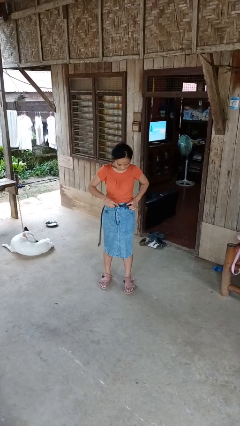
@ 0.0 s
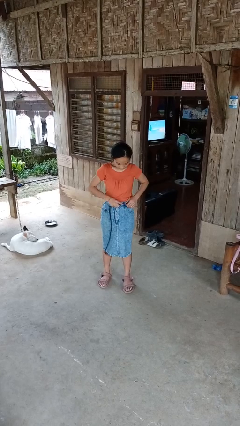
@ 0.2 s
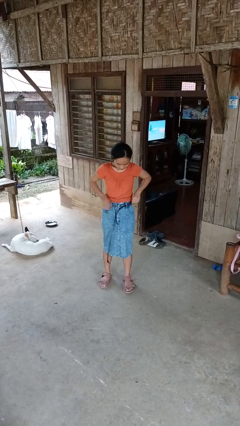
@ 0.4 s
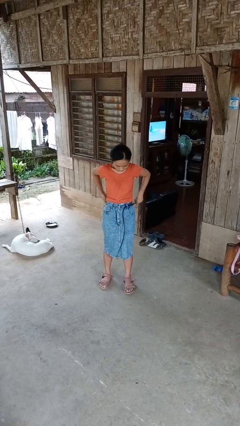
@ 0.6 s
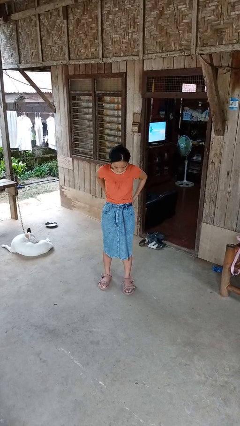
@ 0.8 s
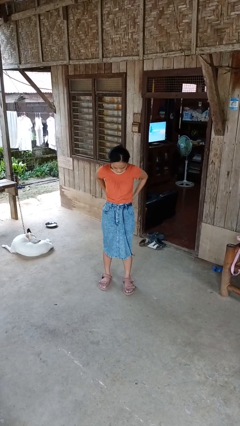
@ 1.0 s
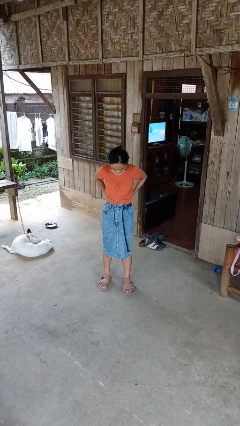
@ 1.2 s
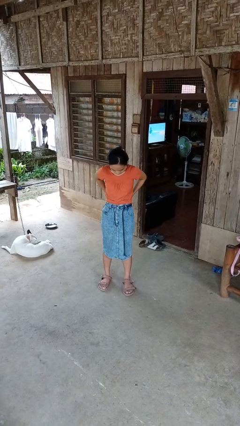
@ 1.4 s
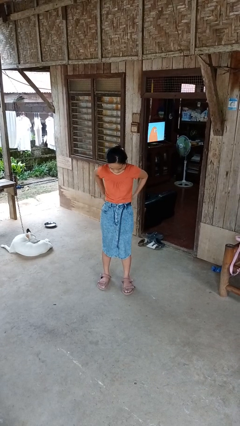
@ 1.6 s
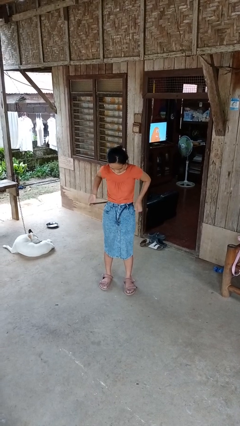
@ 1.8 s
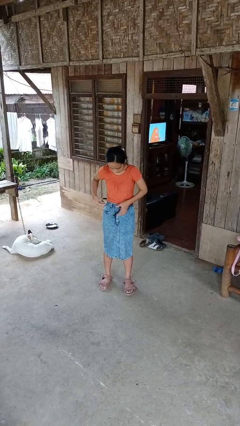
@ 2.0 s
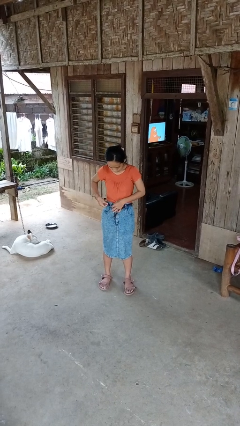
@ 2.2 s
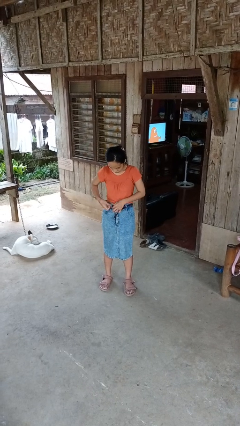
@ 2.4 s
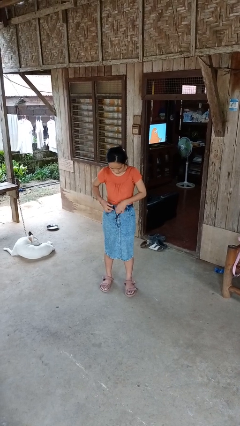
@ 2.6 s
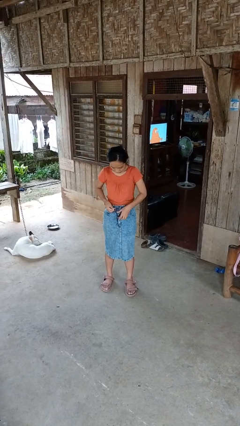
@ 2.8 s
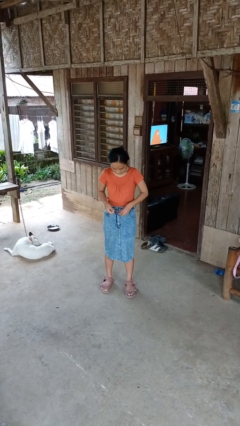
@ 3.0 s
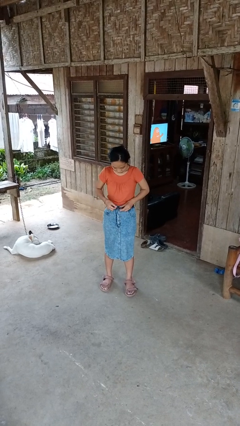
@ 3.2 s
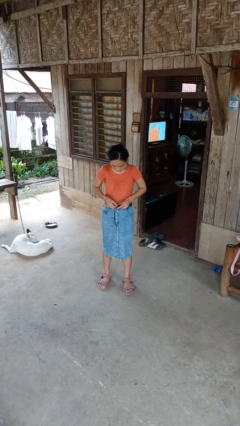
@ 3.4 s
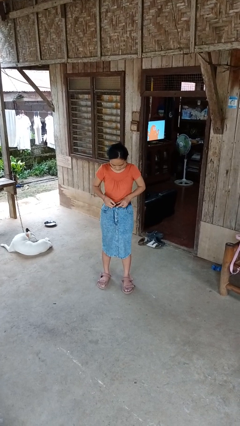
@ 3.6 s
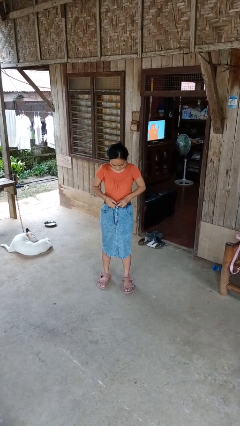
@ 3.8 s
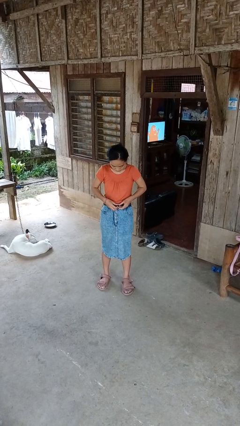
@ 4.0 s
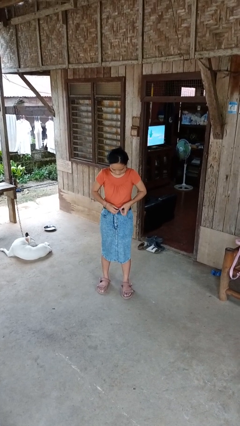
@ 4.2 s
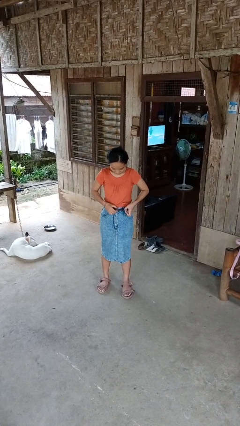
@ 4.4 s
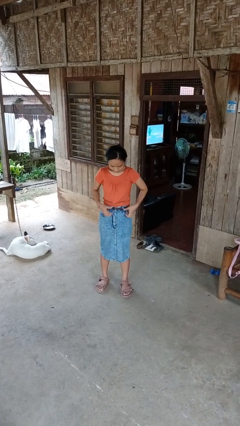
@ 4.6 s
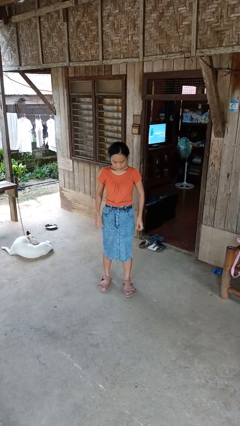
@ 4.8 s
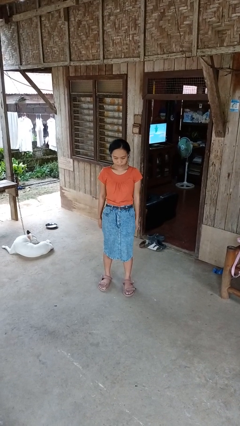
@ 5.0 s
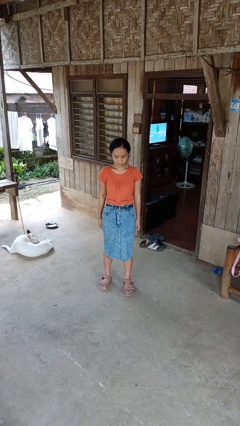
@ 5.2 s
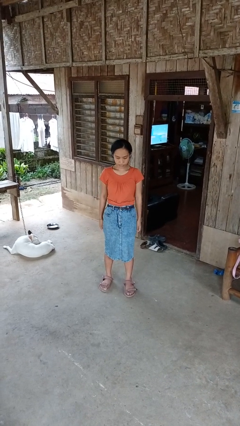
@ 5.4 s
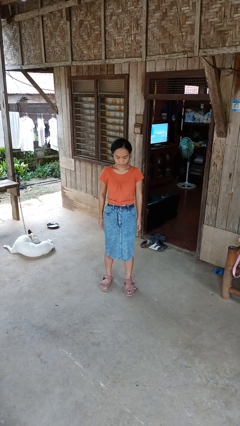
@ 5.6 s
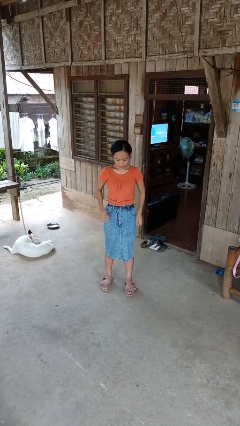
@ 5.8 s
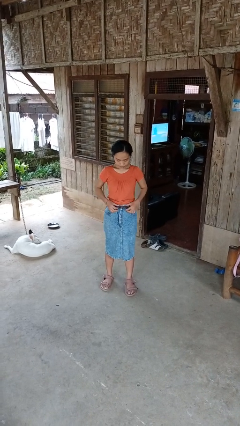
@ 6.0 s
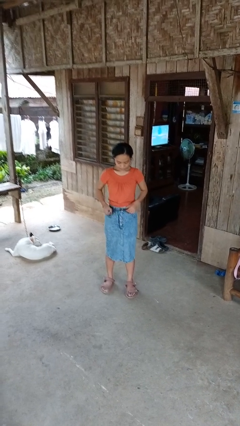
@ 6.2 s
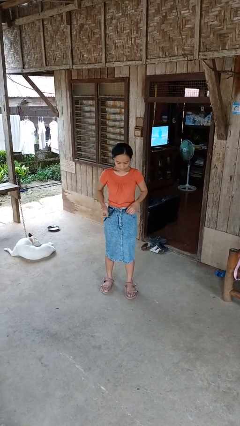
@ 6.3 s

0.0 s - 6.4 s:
person puts on belt

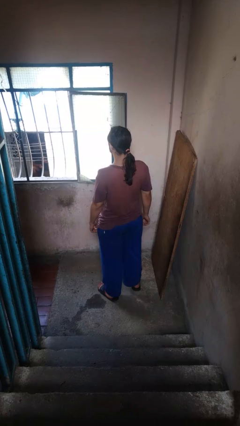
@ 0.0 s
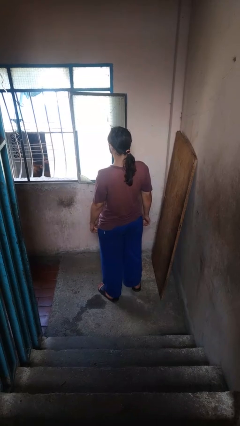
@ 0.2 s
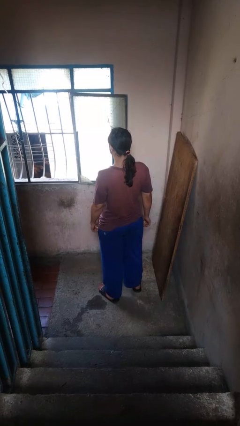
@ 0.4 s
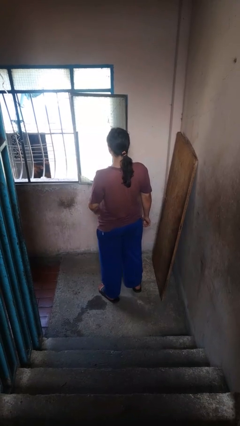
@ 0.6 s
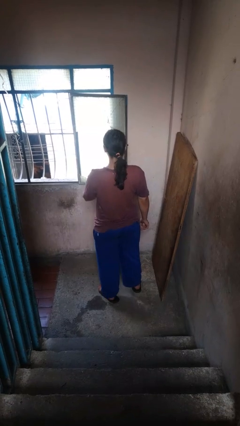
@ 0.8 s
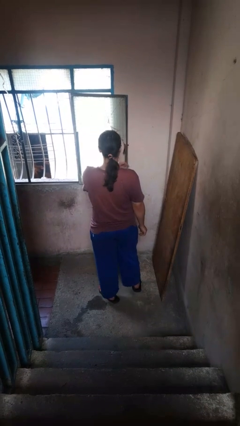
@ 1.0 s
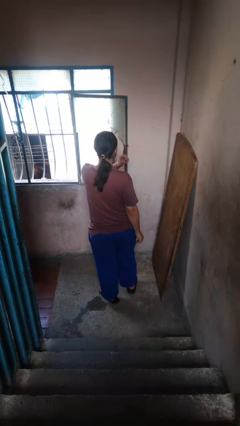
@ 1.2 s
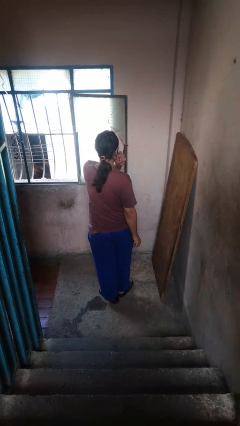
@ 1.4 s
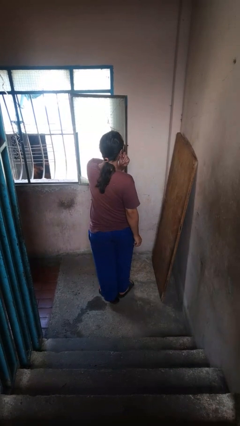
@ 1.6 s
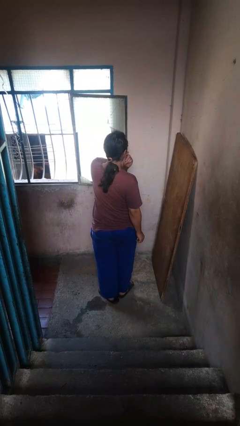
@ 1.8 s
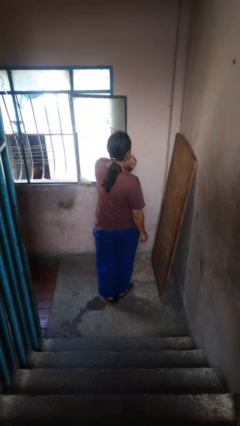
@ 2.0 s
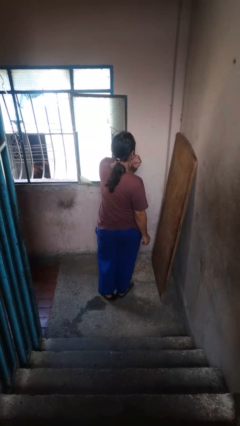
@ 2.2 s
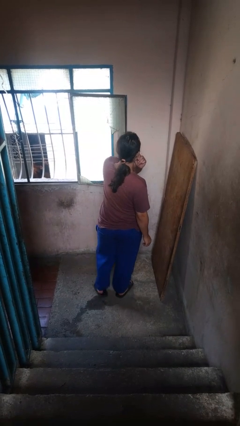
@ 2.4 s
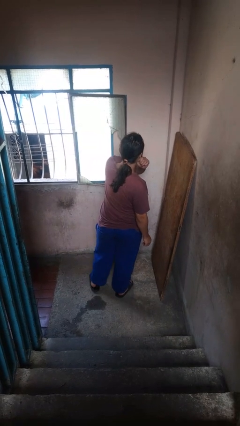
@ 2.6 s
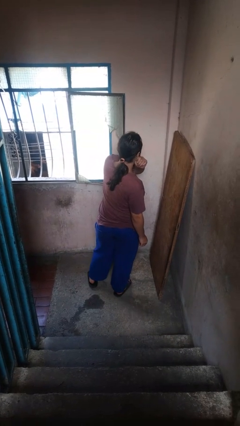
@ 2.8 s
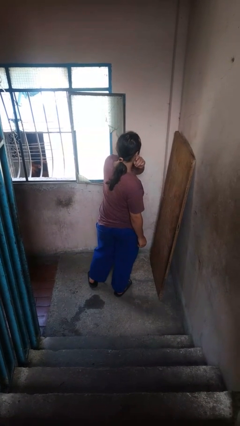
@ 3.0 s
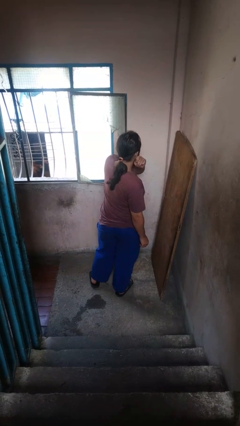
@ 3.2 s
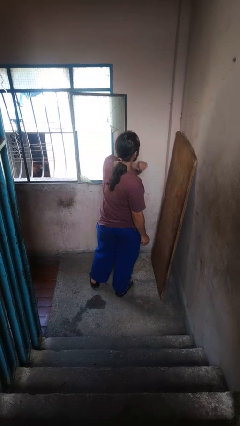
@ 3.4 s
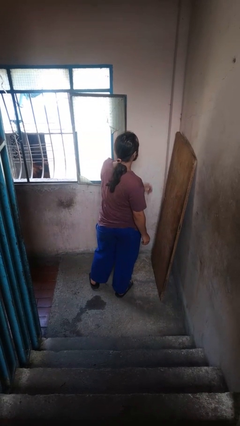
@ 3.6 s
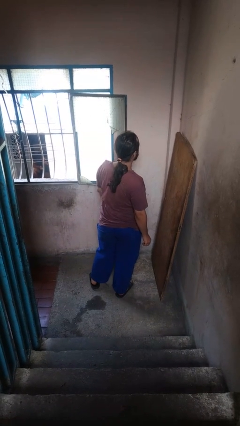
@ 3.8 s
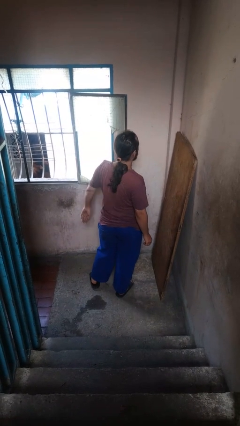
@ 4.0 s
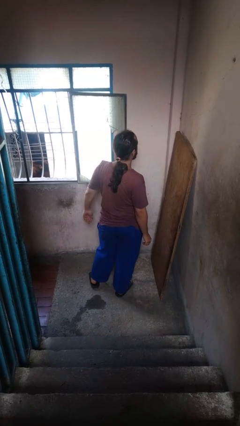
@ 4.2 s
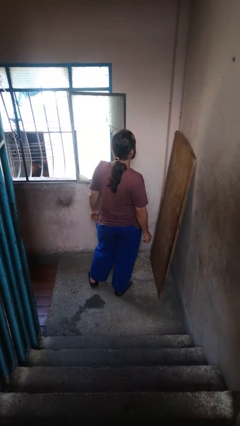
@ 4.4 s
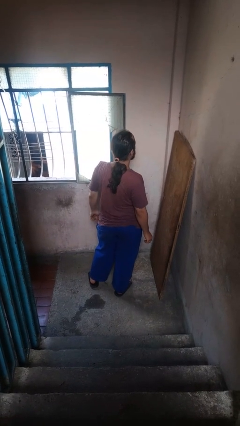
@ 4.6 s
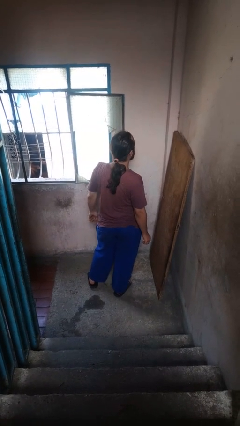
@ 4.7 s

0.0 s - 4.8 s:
person touches earlobe

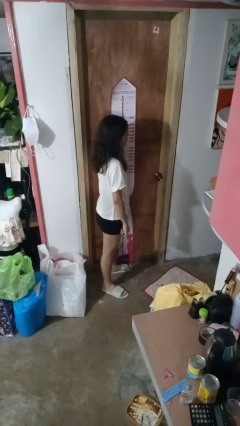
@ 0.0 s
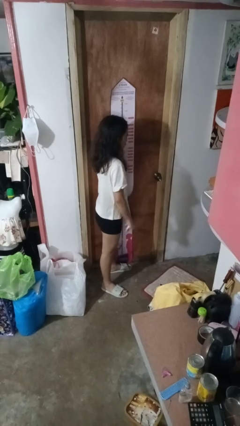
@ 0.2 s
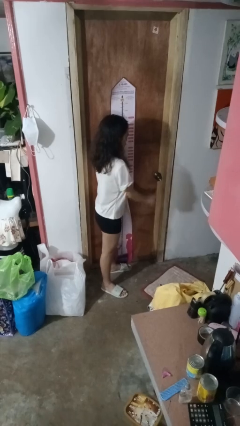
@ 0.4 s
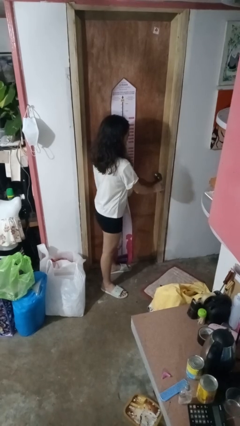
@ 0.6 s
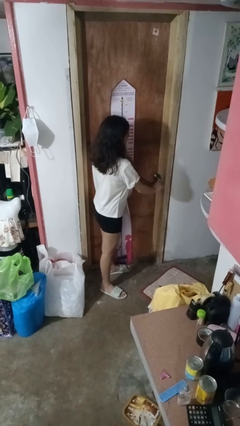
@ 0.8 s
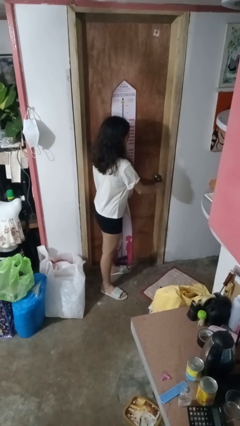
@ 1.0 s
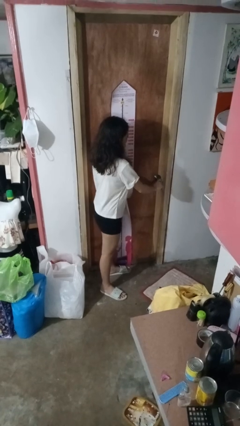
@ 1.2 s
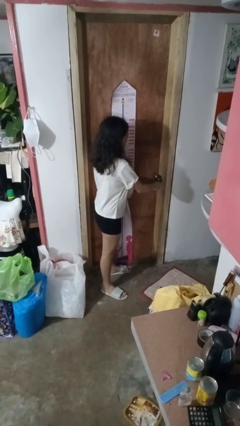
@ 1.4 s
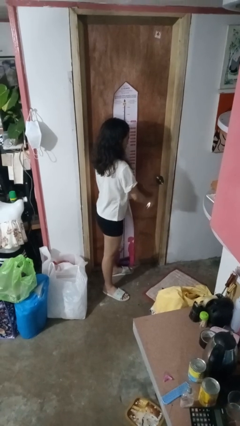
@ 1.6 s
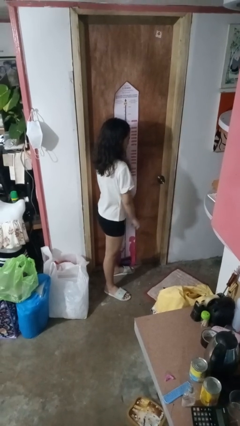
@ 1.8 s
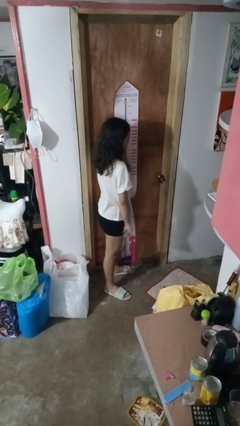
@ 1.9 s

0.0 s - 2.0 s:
person locks door with keys

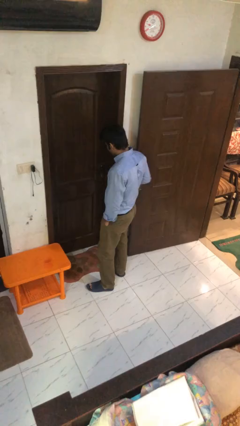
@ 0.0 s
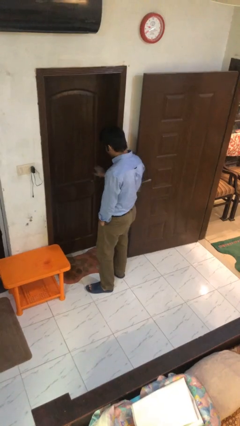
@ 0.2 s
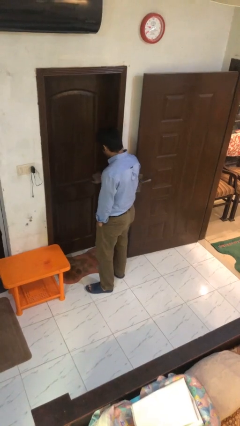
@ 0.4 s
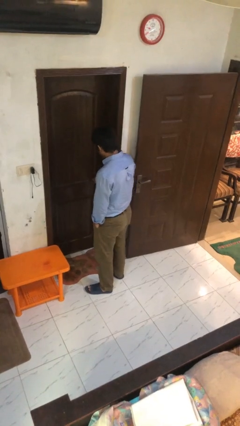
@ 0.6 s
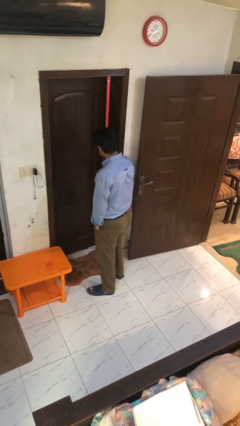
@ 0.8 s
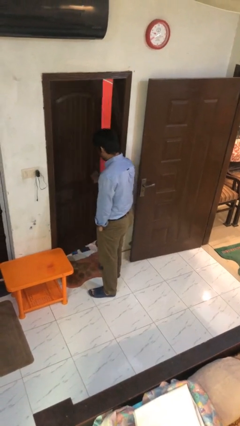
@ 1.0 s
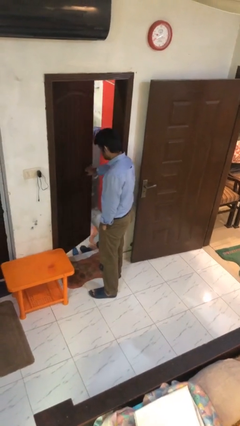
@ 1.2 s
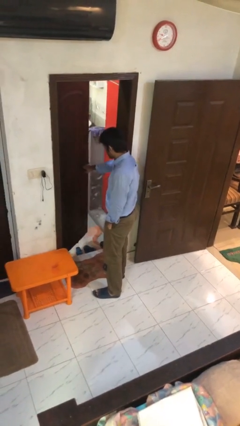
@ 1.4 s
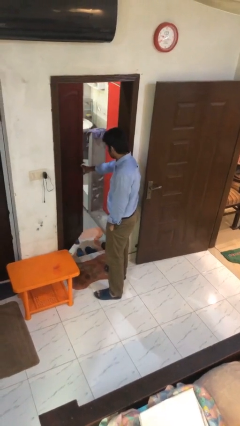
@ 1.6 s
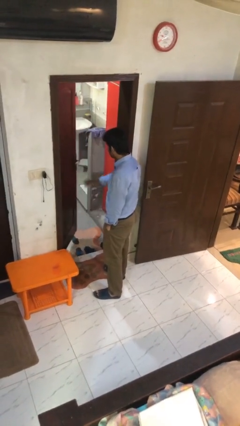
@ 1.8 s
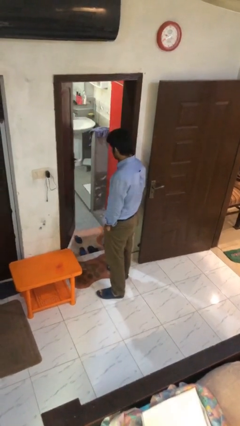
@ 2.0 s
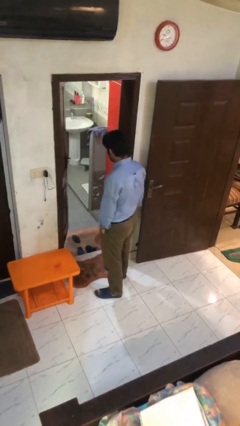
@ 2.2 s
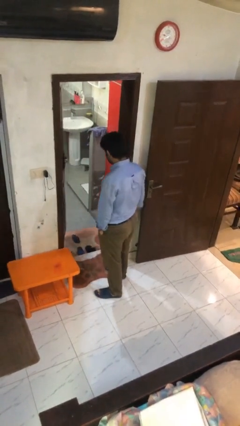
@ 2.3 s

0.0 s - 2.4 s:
person opens facility door

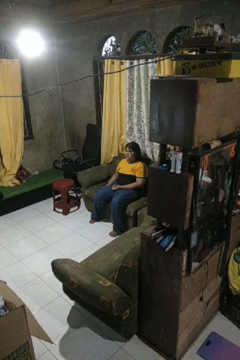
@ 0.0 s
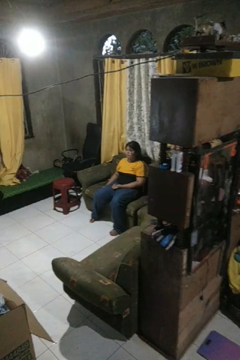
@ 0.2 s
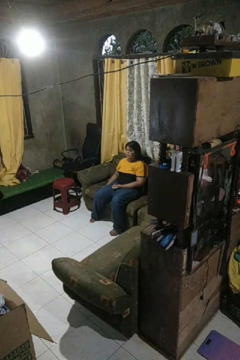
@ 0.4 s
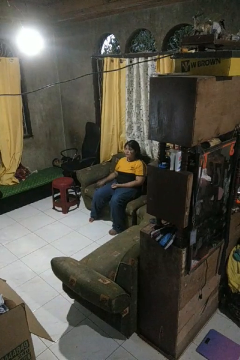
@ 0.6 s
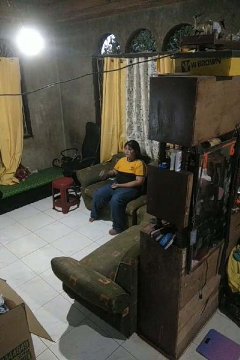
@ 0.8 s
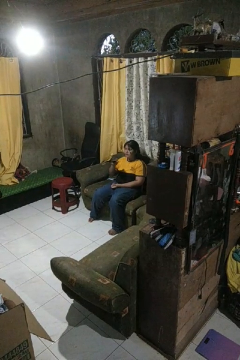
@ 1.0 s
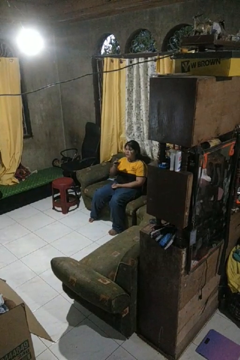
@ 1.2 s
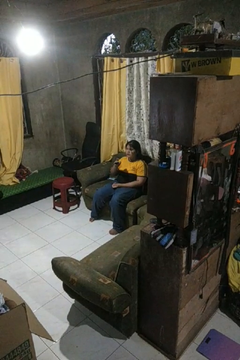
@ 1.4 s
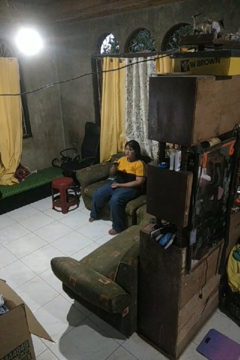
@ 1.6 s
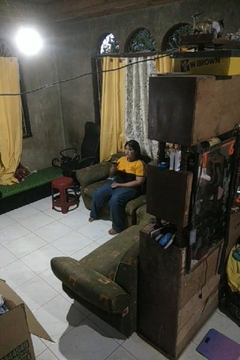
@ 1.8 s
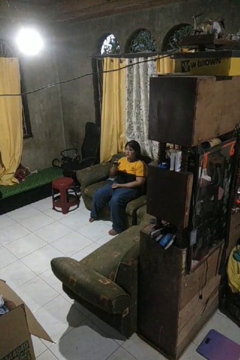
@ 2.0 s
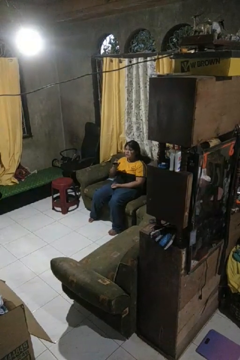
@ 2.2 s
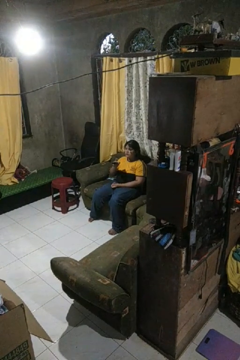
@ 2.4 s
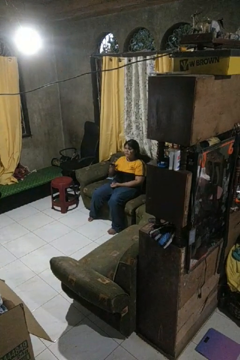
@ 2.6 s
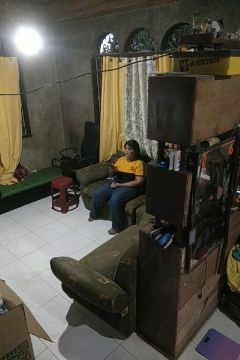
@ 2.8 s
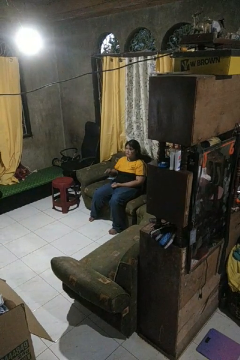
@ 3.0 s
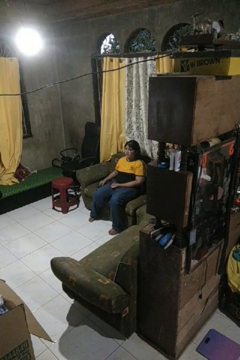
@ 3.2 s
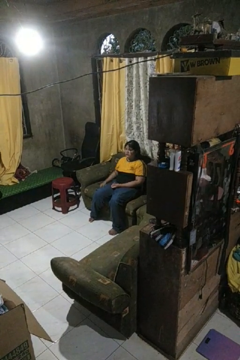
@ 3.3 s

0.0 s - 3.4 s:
person uses television remote
